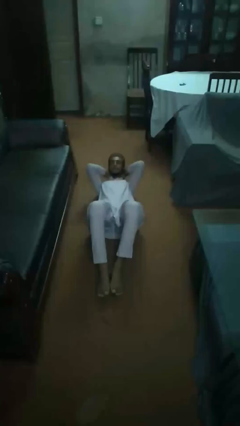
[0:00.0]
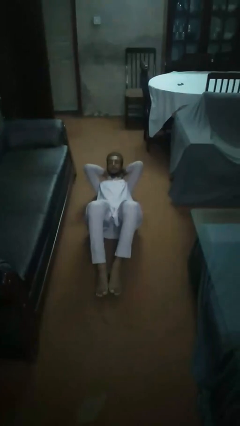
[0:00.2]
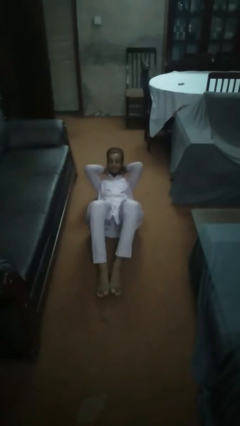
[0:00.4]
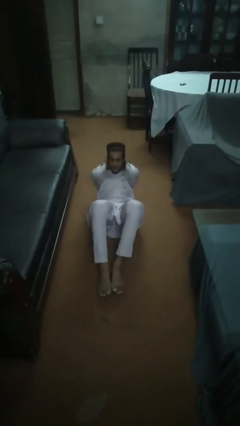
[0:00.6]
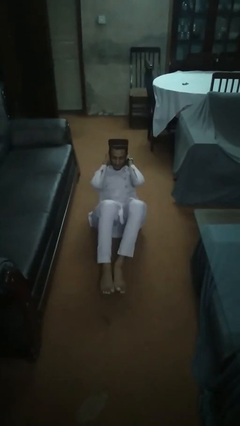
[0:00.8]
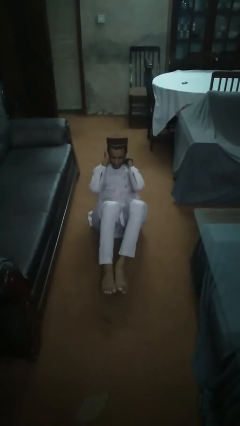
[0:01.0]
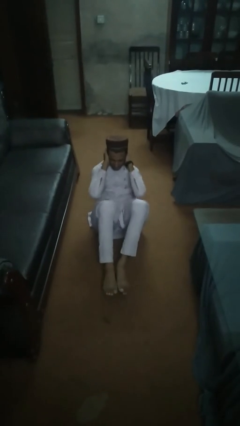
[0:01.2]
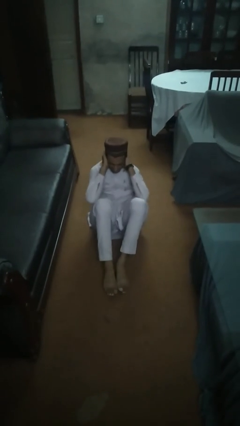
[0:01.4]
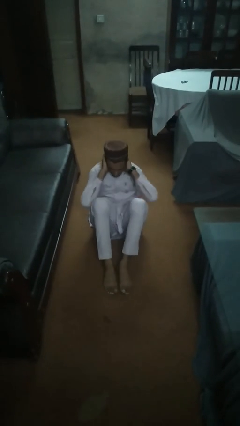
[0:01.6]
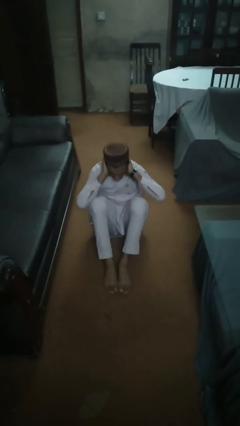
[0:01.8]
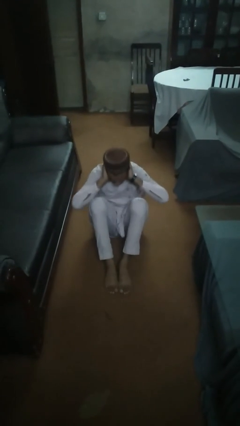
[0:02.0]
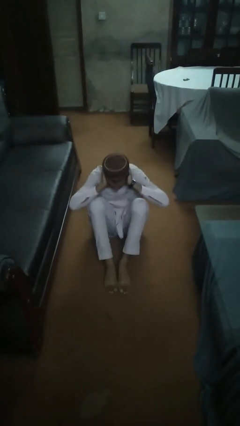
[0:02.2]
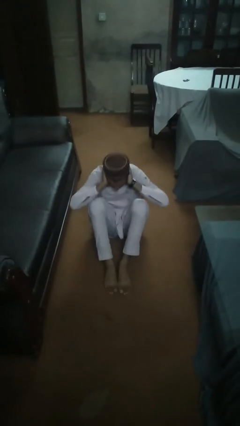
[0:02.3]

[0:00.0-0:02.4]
person exercises with situp

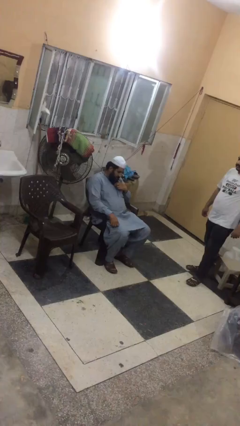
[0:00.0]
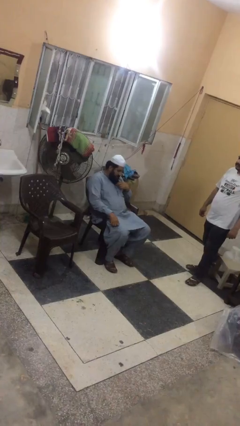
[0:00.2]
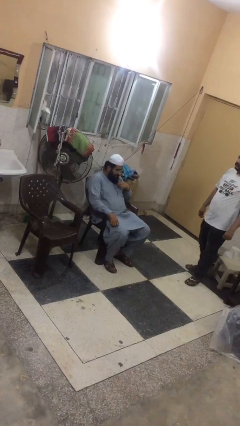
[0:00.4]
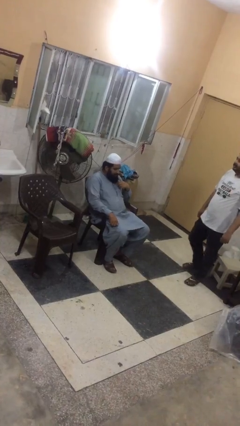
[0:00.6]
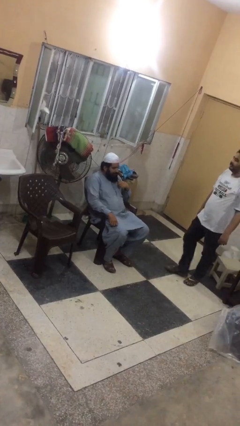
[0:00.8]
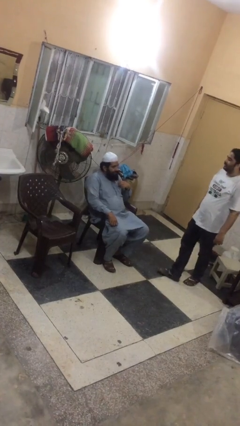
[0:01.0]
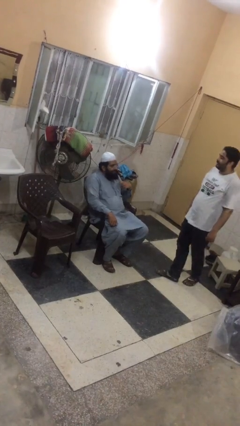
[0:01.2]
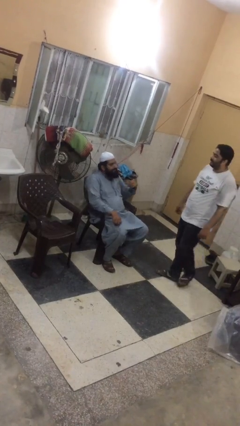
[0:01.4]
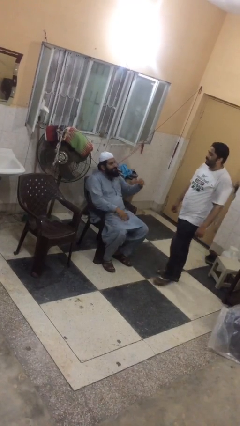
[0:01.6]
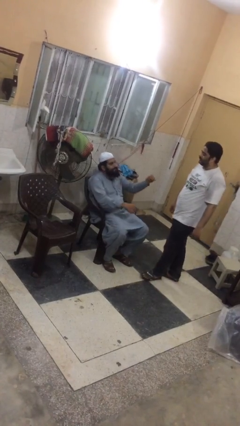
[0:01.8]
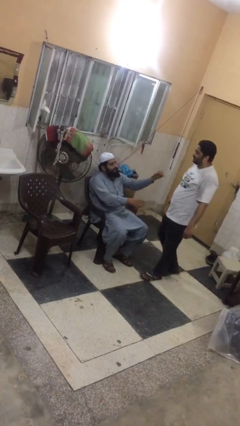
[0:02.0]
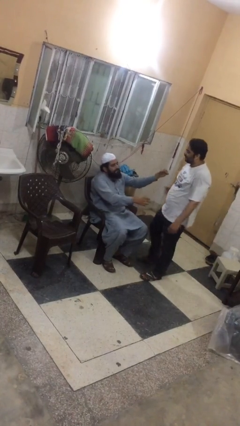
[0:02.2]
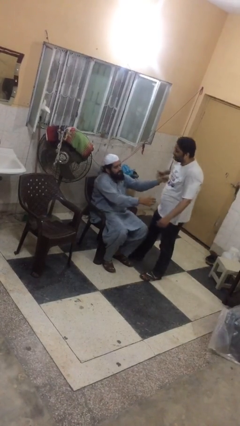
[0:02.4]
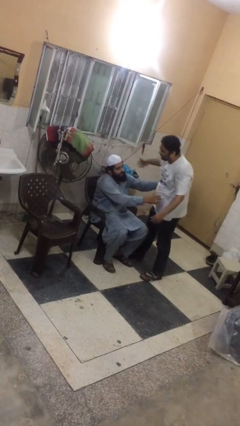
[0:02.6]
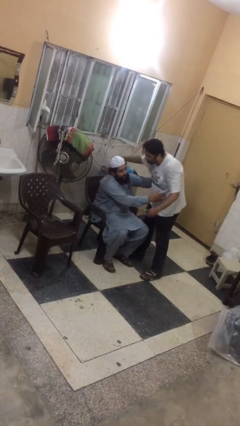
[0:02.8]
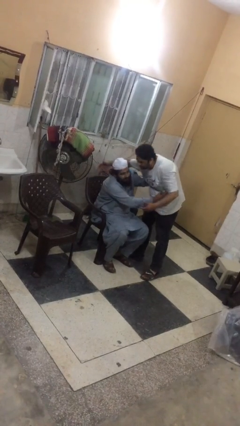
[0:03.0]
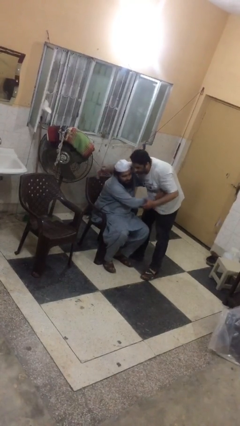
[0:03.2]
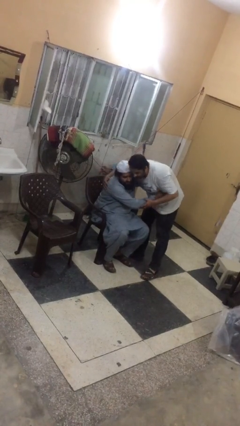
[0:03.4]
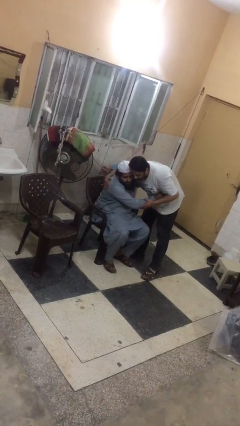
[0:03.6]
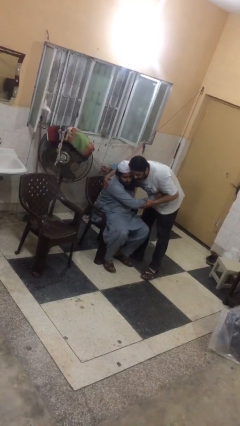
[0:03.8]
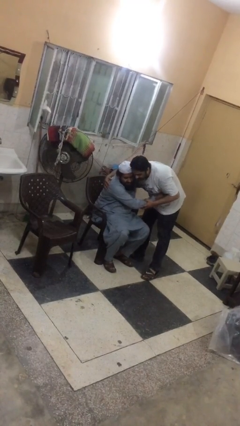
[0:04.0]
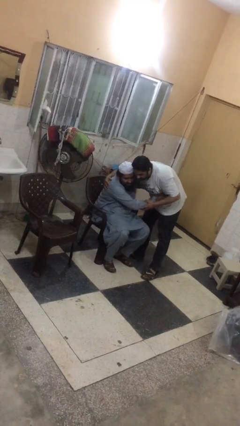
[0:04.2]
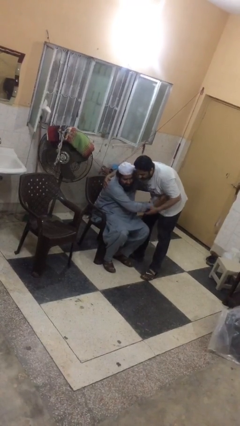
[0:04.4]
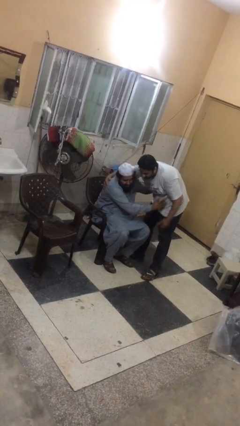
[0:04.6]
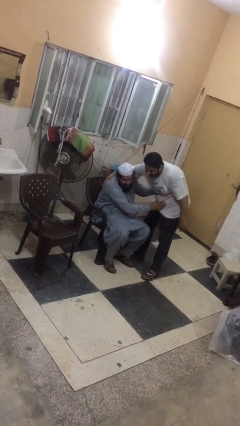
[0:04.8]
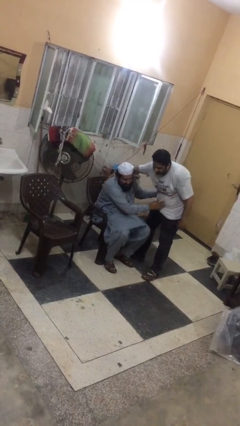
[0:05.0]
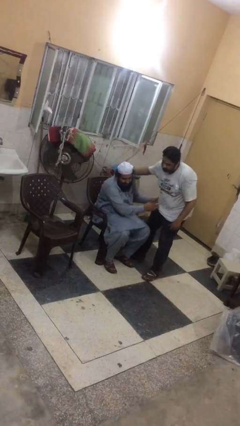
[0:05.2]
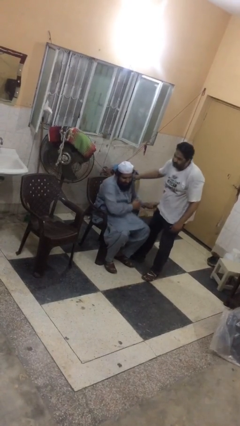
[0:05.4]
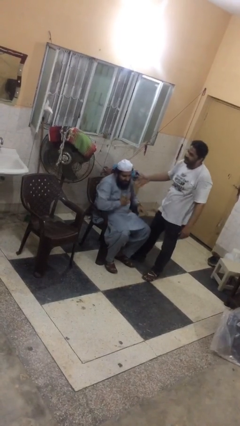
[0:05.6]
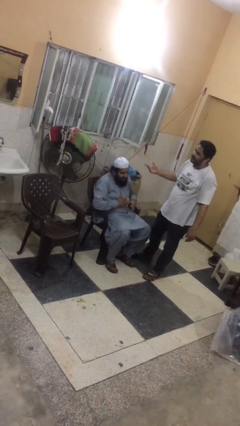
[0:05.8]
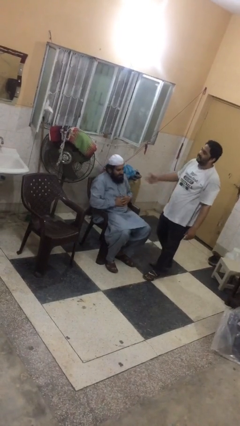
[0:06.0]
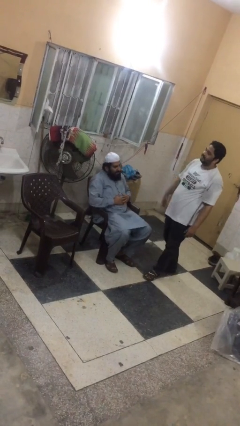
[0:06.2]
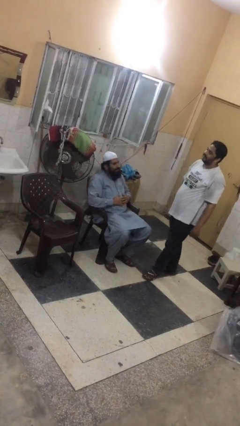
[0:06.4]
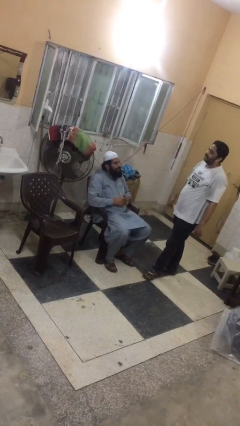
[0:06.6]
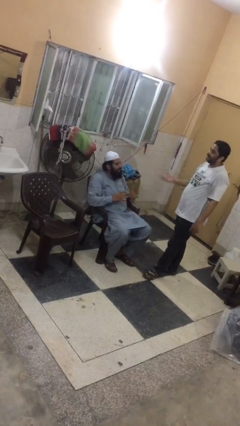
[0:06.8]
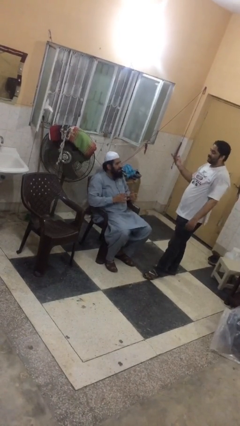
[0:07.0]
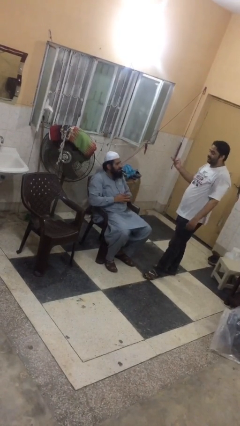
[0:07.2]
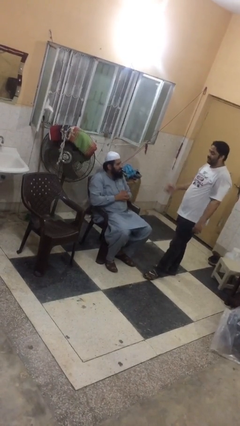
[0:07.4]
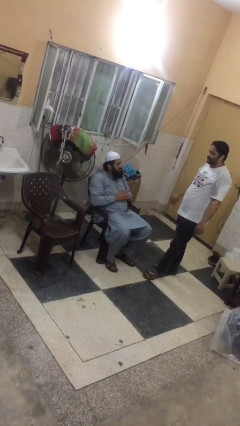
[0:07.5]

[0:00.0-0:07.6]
person embraces person

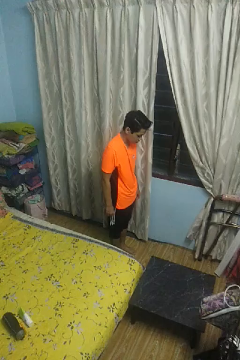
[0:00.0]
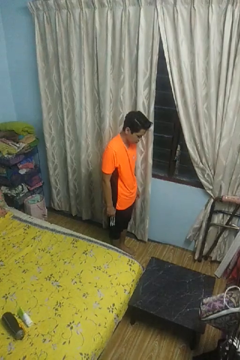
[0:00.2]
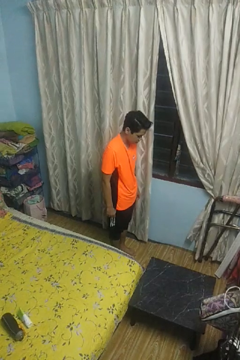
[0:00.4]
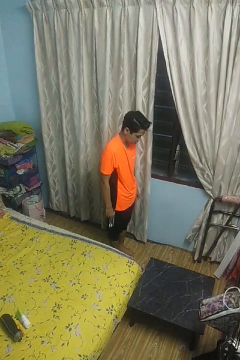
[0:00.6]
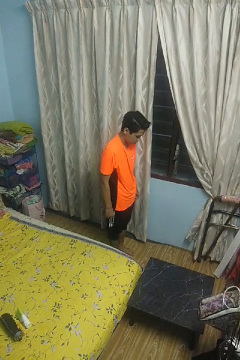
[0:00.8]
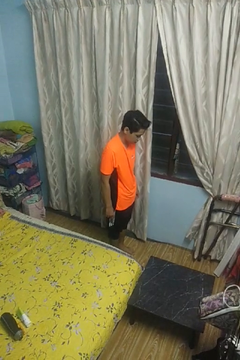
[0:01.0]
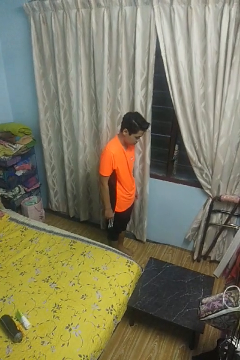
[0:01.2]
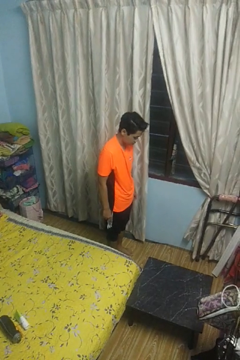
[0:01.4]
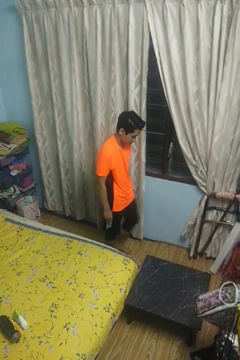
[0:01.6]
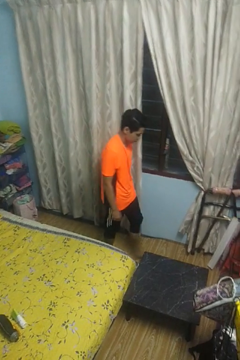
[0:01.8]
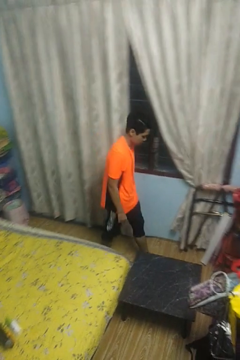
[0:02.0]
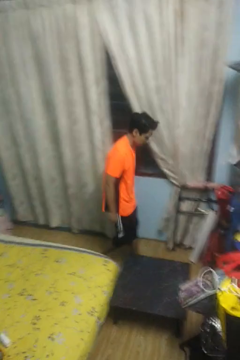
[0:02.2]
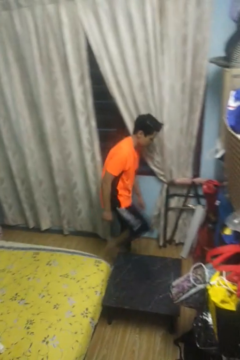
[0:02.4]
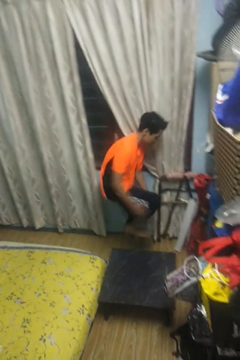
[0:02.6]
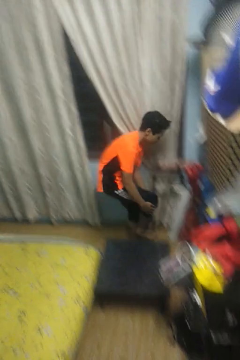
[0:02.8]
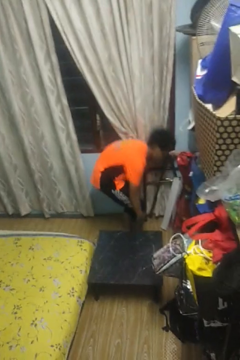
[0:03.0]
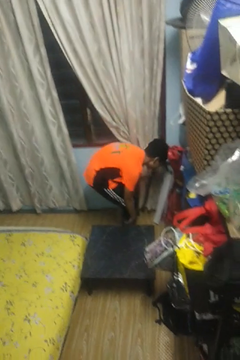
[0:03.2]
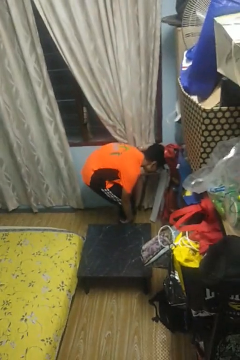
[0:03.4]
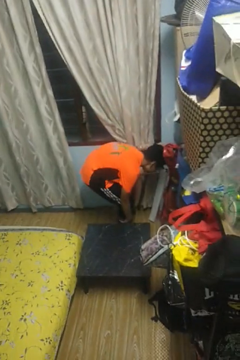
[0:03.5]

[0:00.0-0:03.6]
person bumps into table

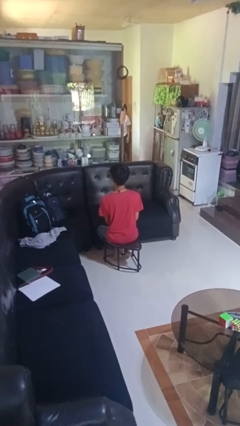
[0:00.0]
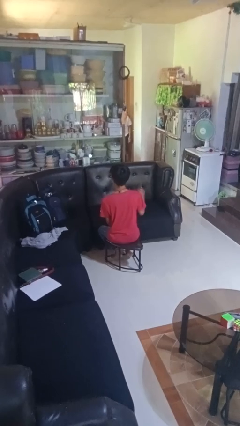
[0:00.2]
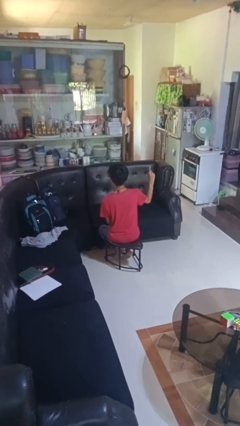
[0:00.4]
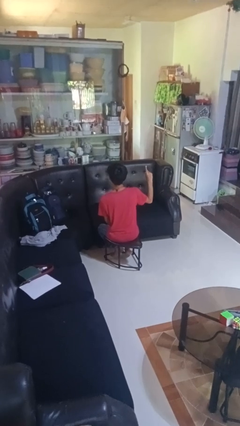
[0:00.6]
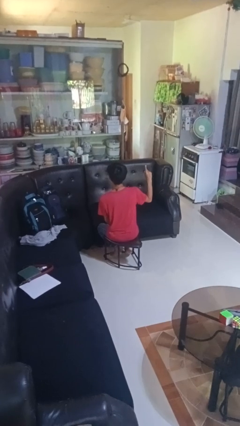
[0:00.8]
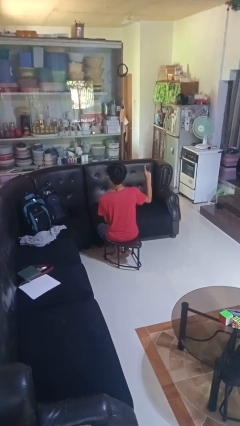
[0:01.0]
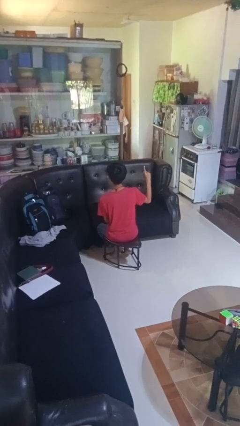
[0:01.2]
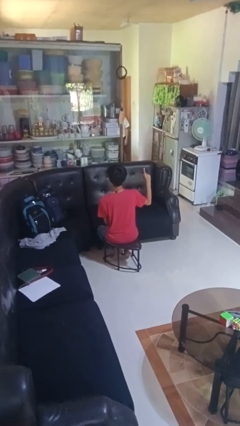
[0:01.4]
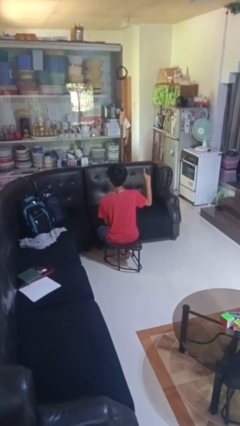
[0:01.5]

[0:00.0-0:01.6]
person gestures number one

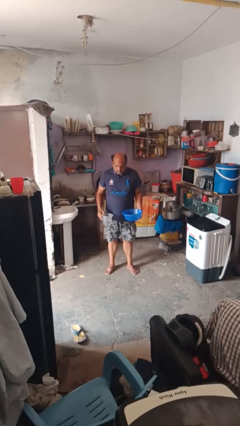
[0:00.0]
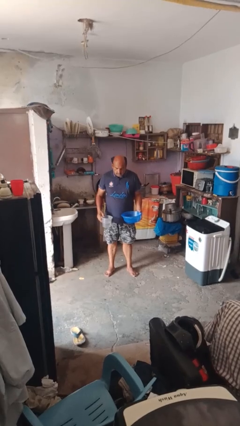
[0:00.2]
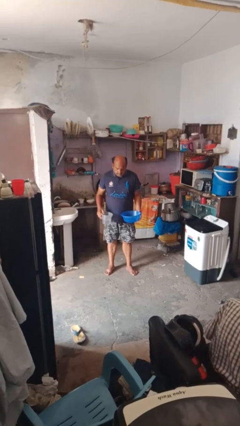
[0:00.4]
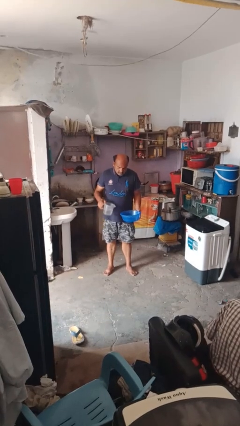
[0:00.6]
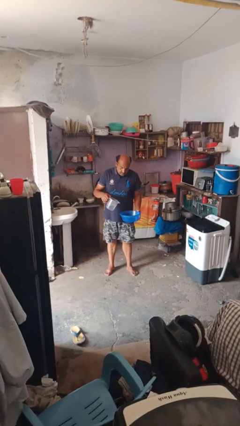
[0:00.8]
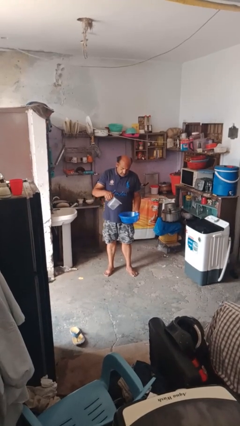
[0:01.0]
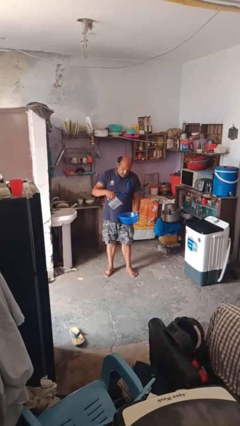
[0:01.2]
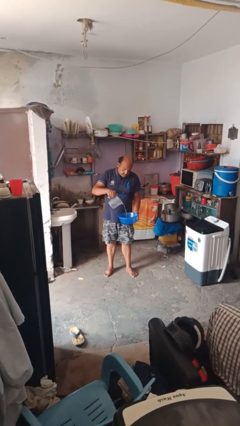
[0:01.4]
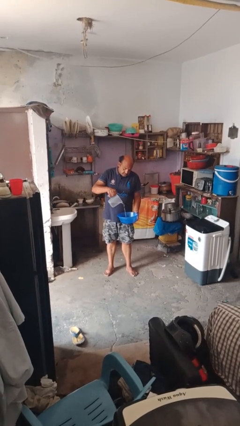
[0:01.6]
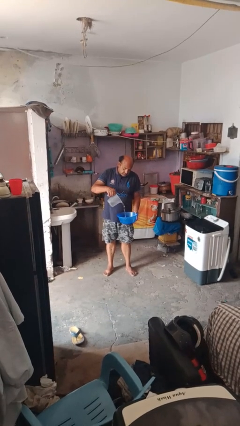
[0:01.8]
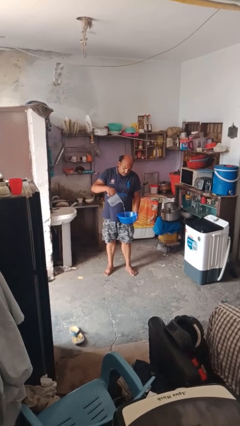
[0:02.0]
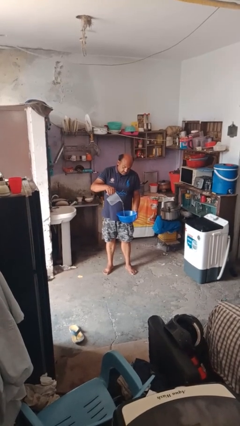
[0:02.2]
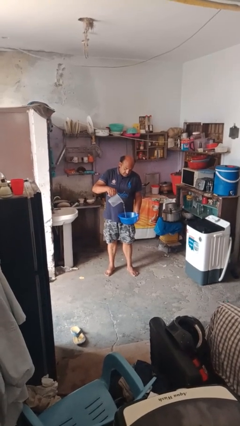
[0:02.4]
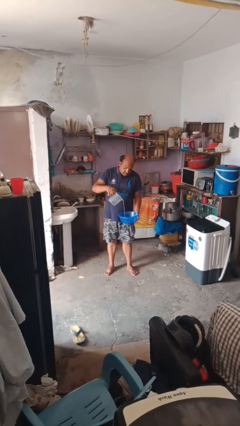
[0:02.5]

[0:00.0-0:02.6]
person pours into bowl

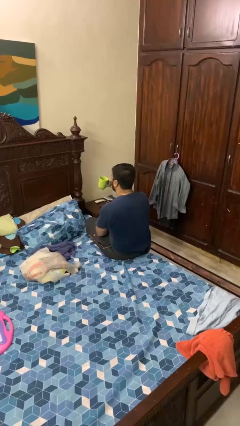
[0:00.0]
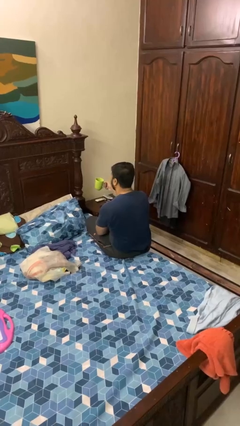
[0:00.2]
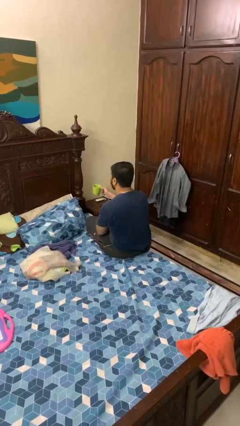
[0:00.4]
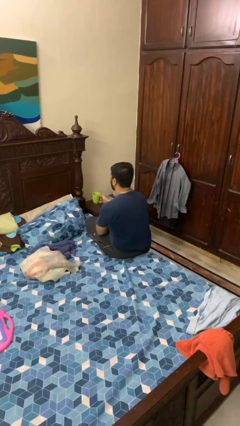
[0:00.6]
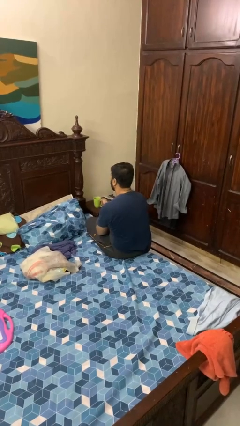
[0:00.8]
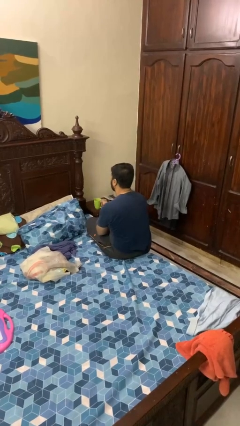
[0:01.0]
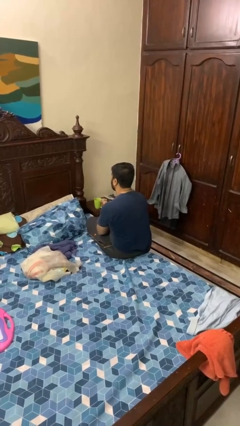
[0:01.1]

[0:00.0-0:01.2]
person puts down object on table
